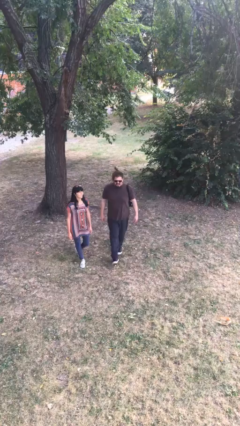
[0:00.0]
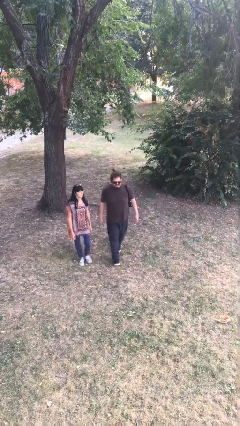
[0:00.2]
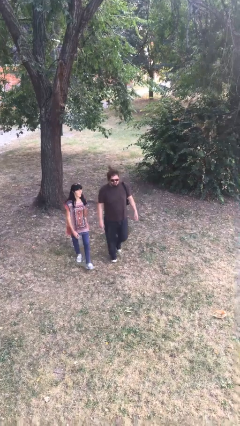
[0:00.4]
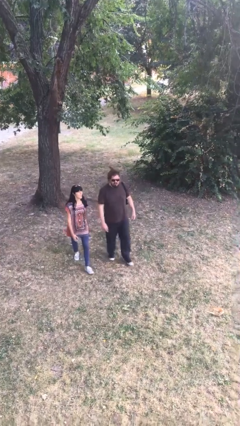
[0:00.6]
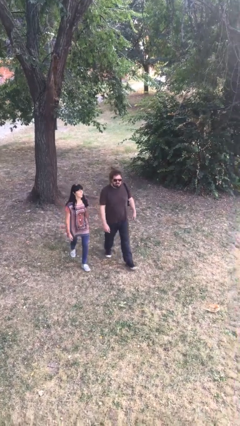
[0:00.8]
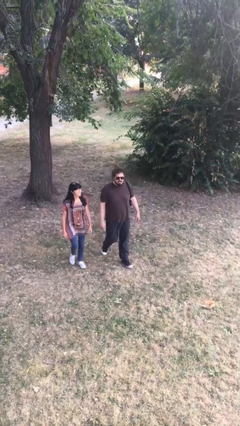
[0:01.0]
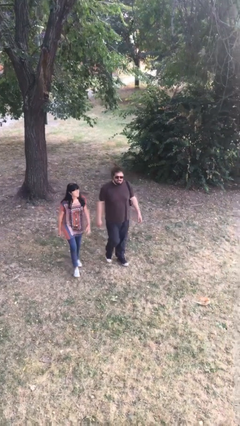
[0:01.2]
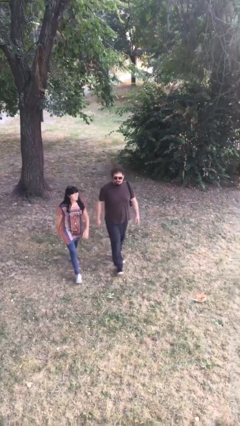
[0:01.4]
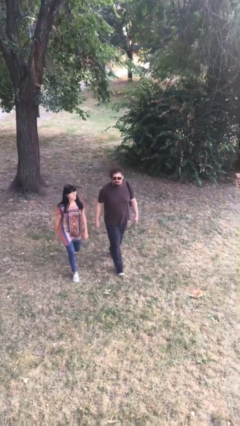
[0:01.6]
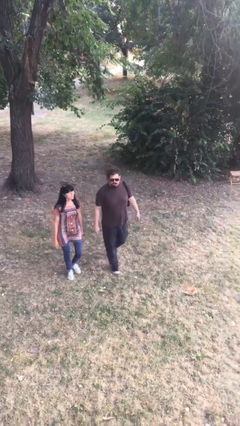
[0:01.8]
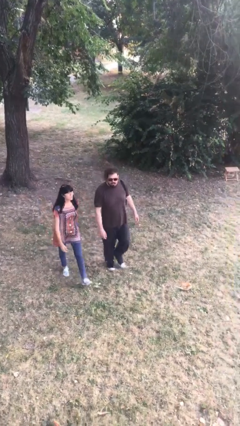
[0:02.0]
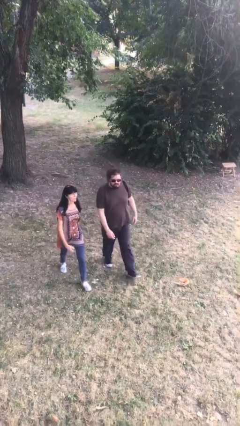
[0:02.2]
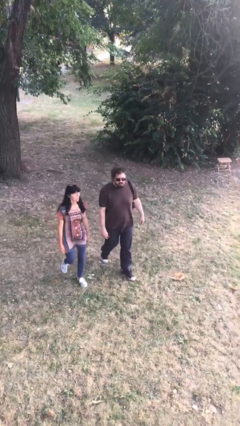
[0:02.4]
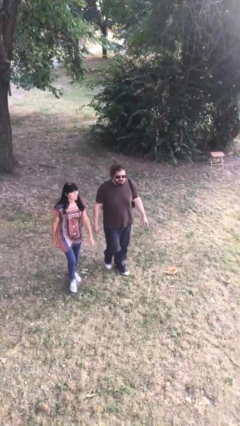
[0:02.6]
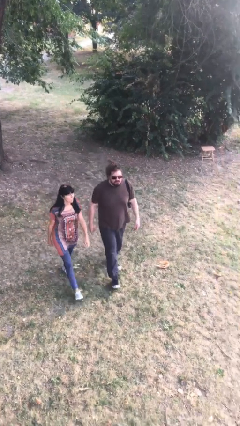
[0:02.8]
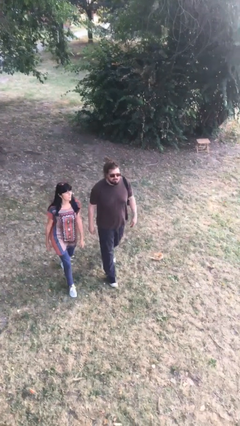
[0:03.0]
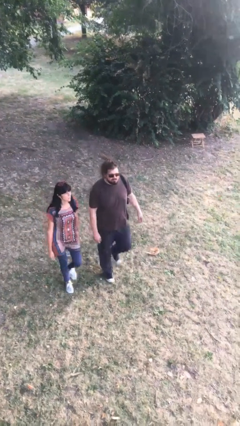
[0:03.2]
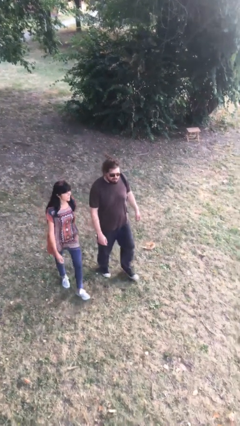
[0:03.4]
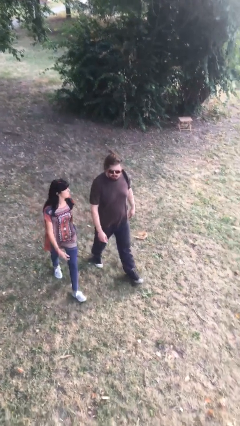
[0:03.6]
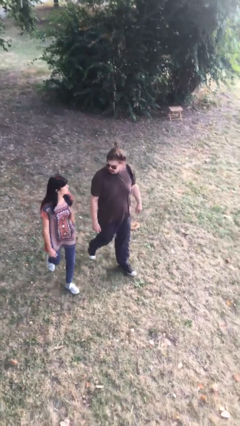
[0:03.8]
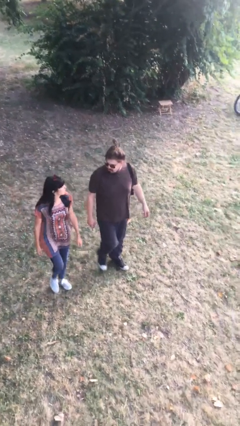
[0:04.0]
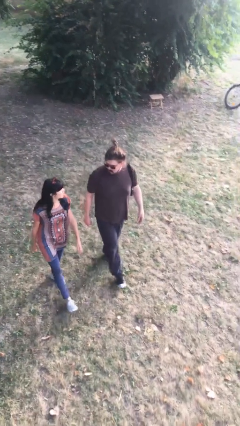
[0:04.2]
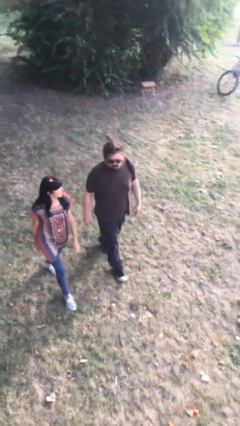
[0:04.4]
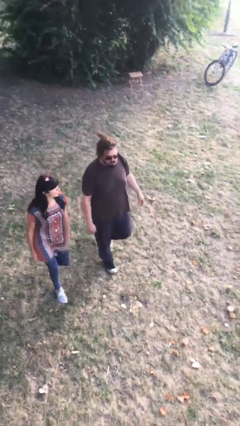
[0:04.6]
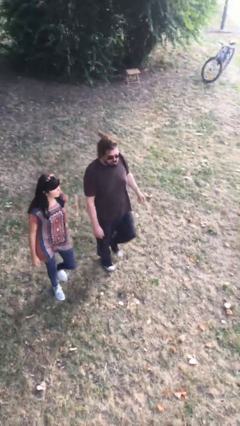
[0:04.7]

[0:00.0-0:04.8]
person talks to person

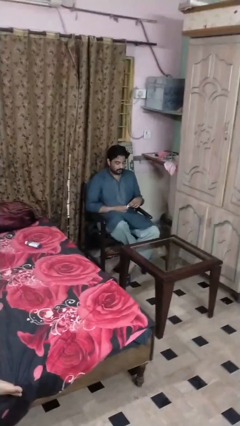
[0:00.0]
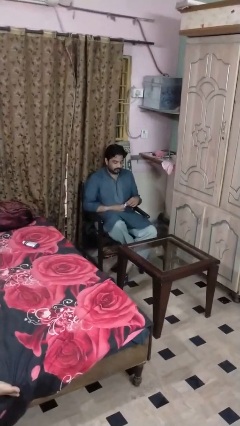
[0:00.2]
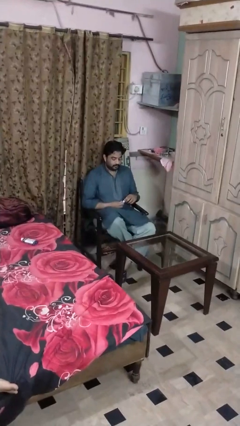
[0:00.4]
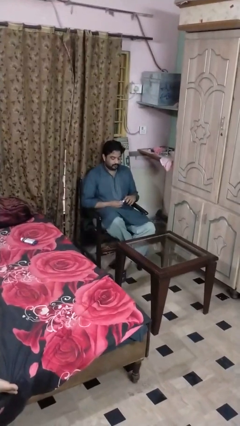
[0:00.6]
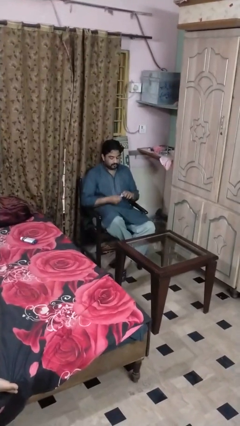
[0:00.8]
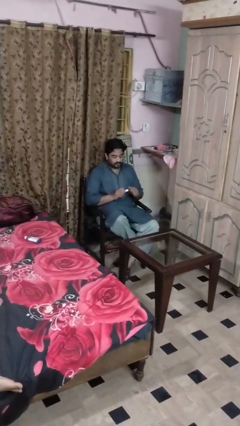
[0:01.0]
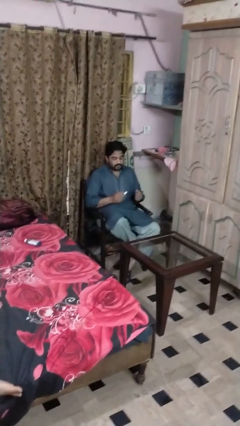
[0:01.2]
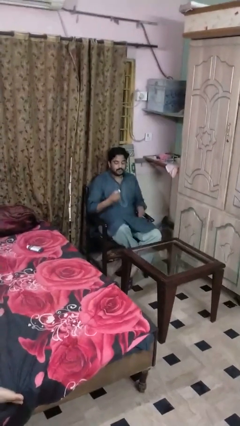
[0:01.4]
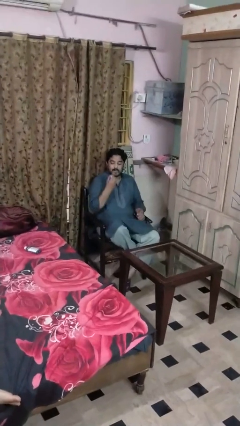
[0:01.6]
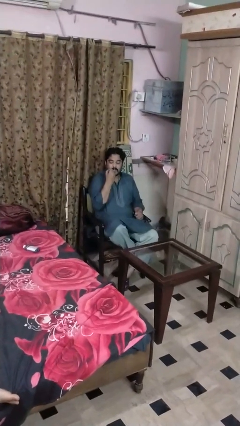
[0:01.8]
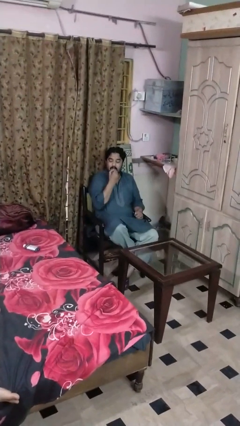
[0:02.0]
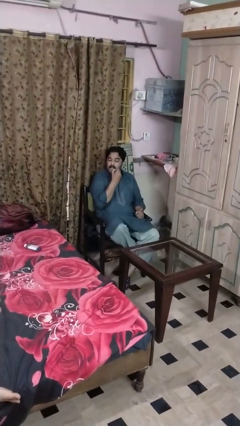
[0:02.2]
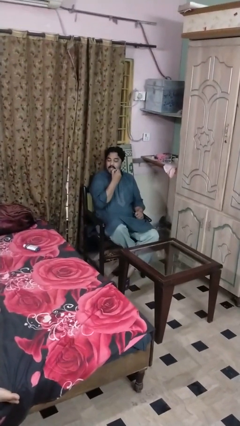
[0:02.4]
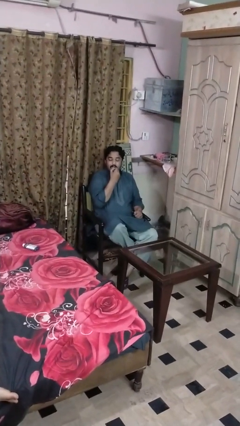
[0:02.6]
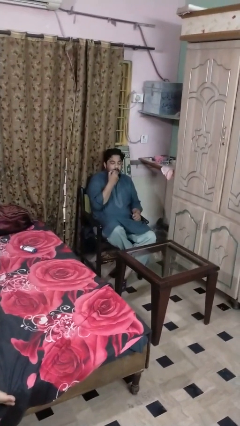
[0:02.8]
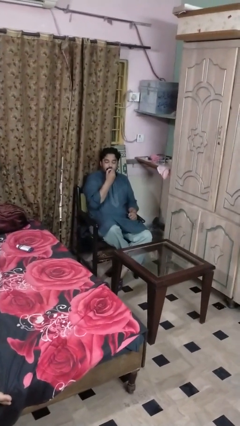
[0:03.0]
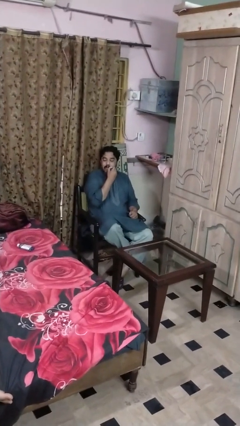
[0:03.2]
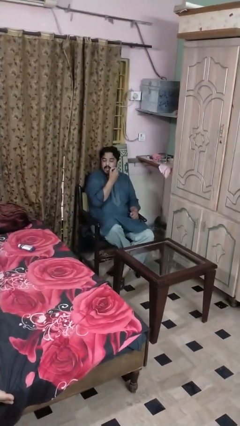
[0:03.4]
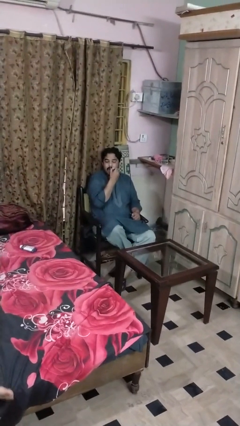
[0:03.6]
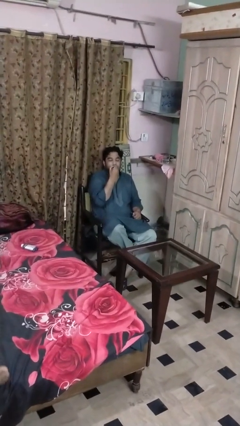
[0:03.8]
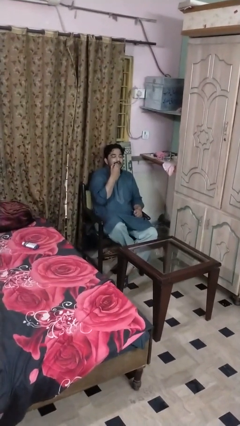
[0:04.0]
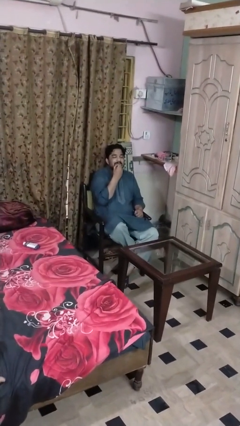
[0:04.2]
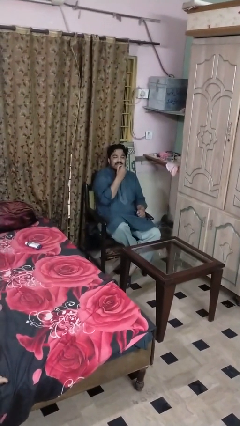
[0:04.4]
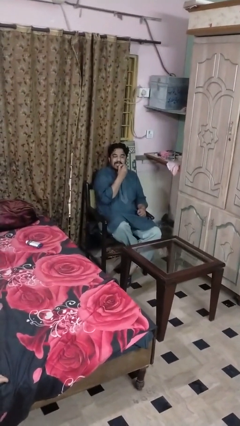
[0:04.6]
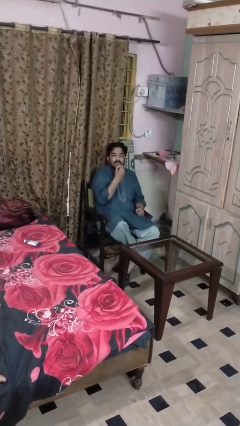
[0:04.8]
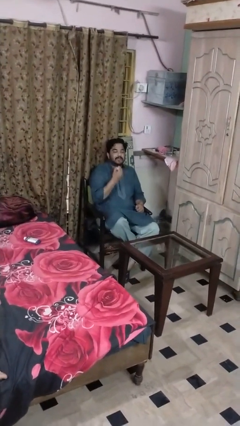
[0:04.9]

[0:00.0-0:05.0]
person applies lip makeup

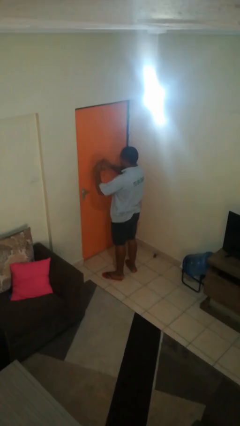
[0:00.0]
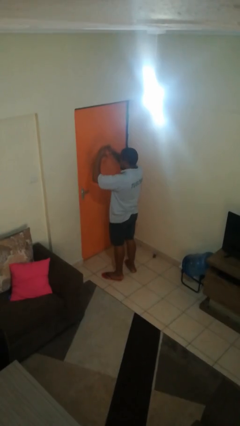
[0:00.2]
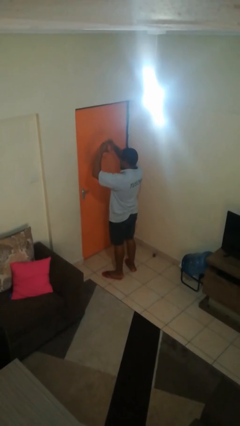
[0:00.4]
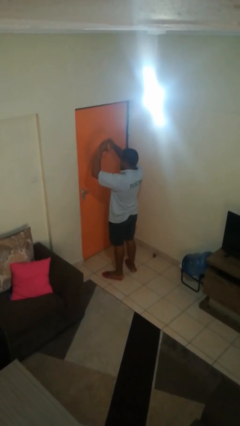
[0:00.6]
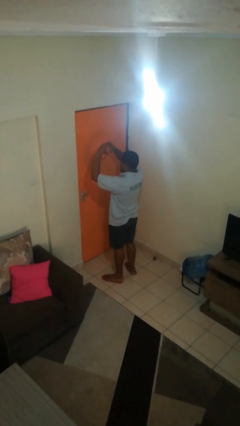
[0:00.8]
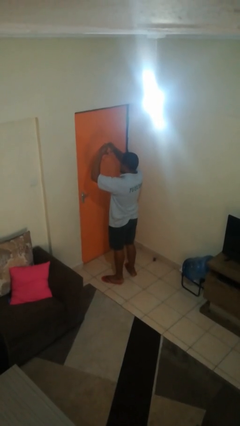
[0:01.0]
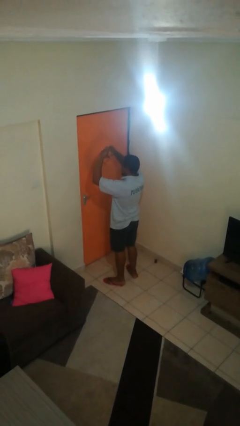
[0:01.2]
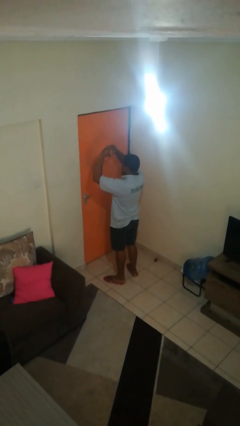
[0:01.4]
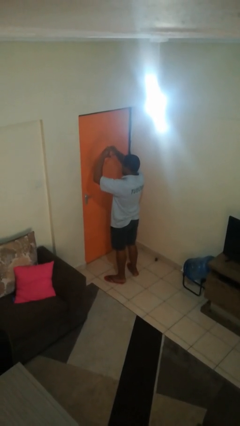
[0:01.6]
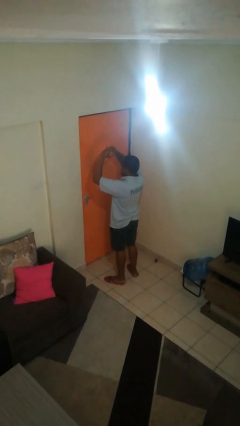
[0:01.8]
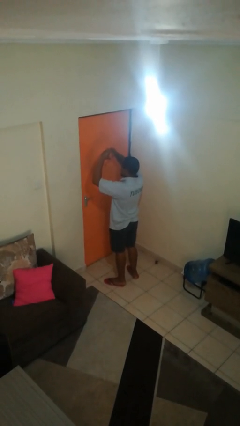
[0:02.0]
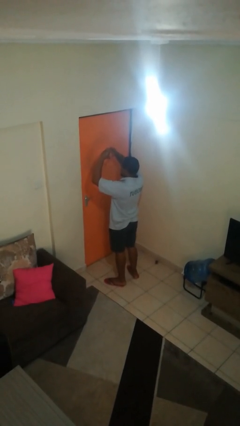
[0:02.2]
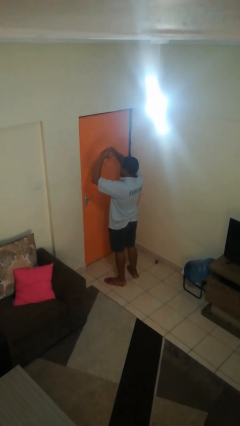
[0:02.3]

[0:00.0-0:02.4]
person gestures heart

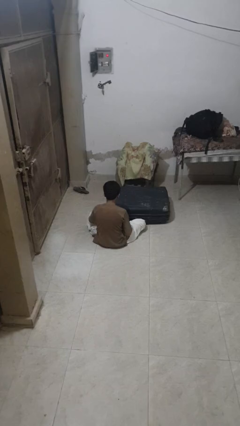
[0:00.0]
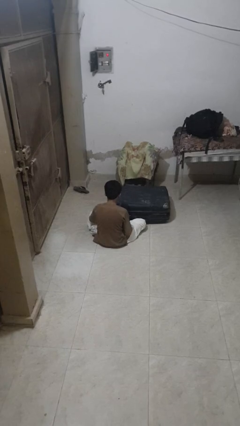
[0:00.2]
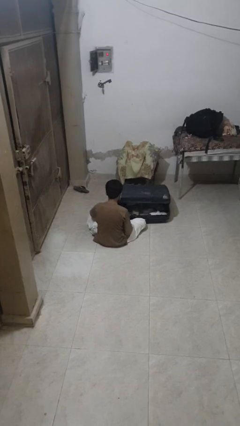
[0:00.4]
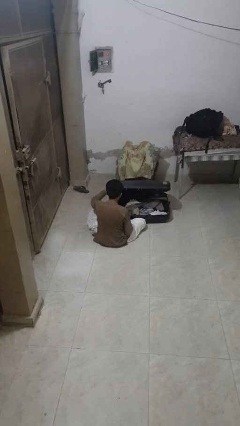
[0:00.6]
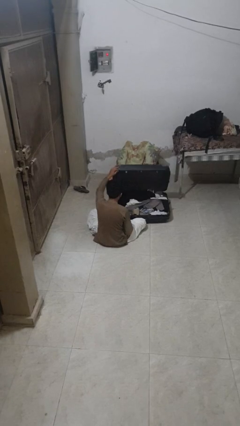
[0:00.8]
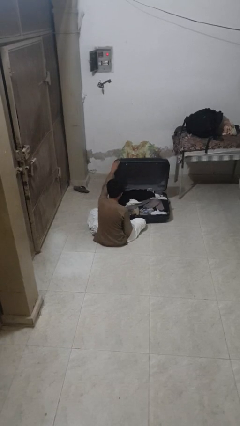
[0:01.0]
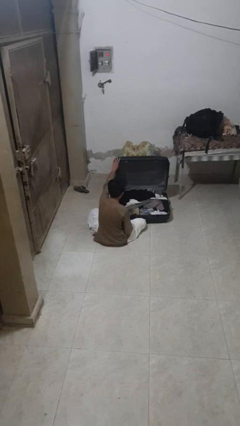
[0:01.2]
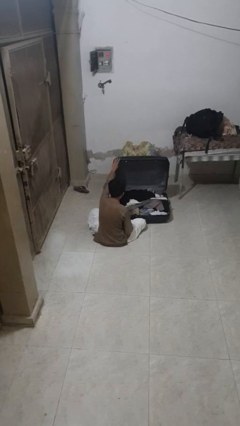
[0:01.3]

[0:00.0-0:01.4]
person opens suitcase

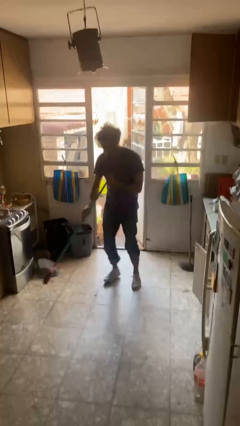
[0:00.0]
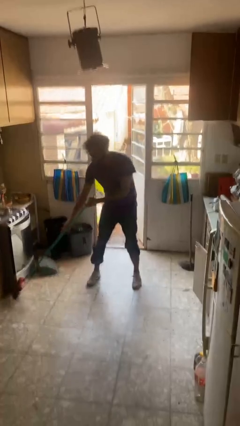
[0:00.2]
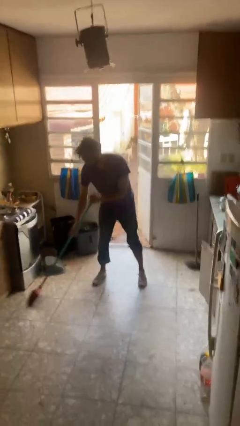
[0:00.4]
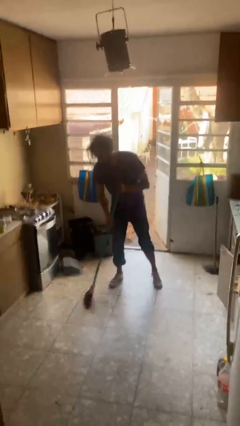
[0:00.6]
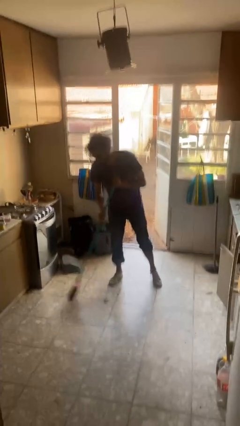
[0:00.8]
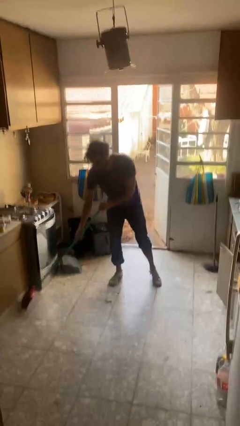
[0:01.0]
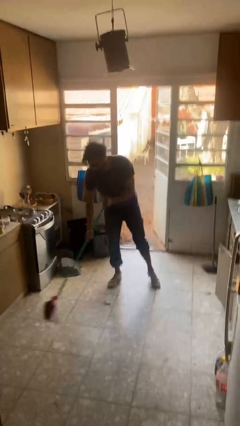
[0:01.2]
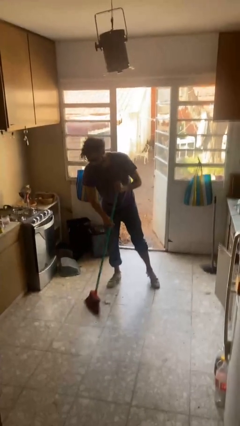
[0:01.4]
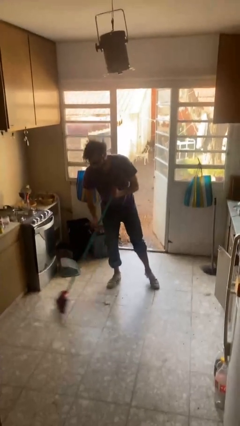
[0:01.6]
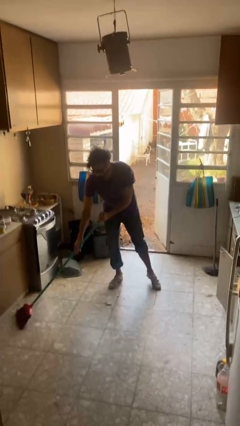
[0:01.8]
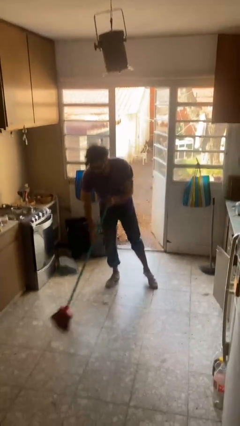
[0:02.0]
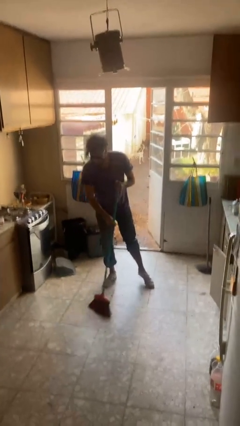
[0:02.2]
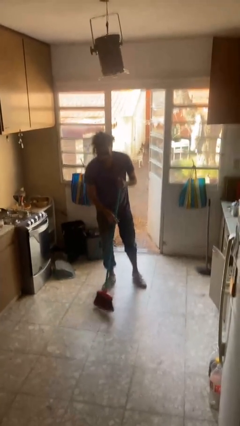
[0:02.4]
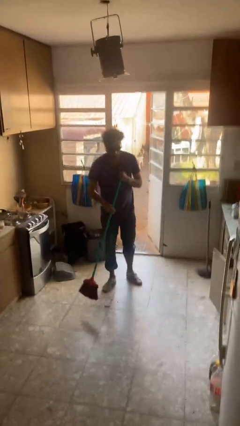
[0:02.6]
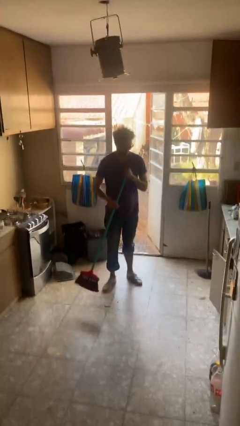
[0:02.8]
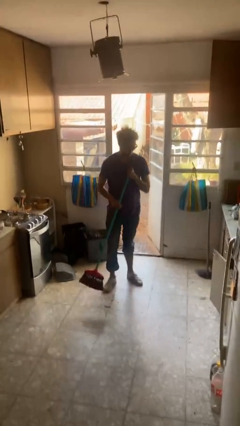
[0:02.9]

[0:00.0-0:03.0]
person sweeps floor

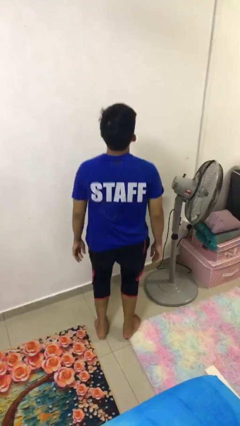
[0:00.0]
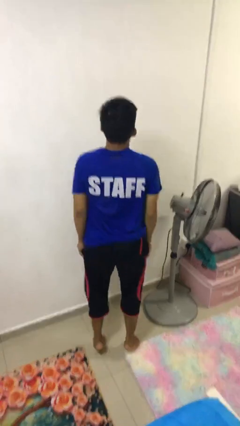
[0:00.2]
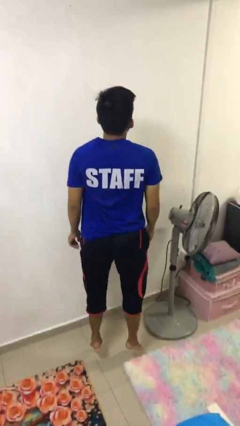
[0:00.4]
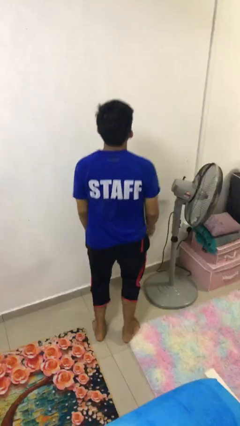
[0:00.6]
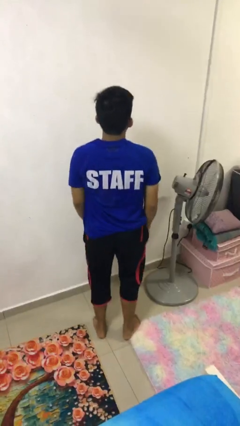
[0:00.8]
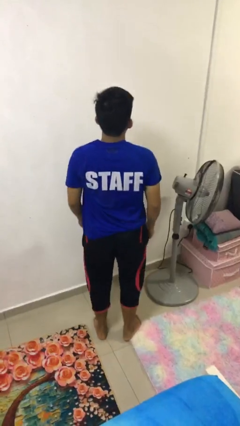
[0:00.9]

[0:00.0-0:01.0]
person jumps
